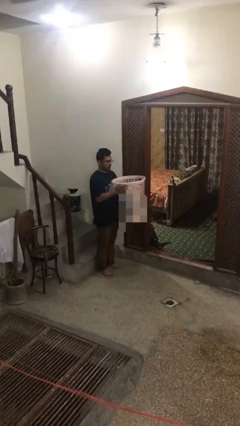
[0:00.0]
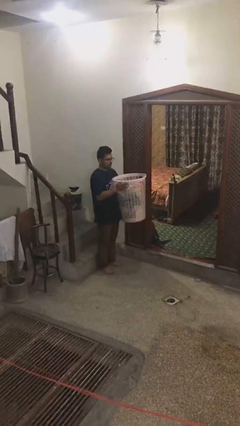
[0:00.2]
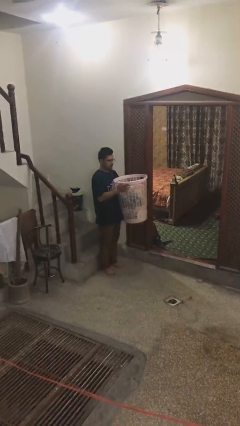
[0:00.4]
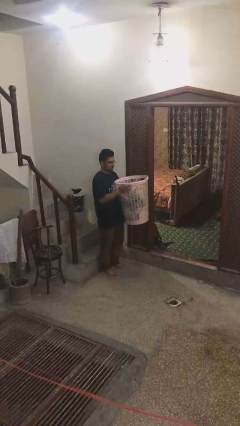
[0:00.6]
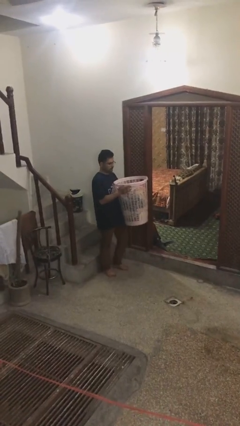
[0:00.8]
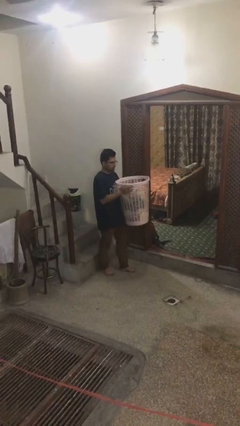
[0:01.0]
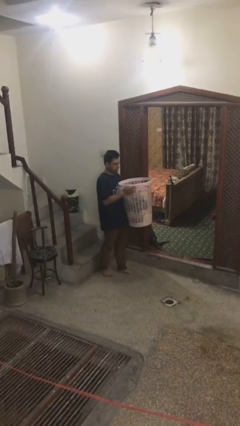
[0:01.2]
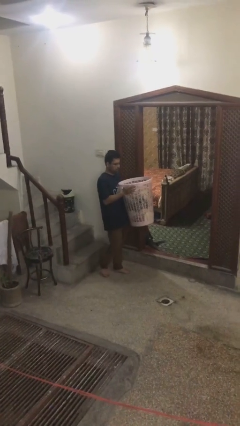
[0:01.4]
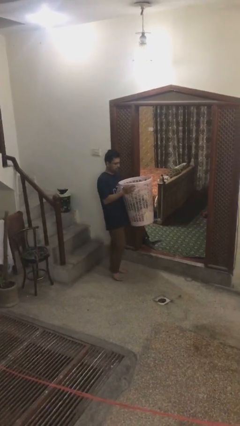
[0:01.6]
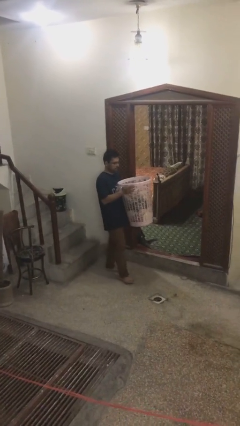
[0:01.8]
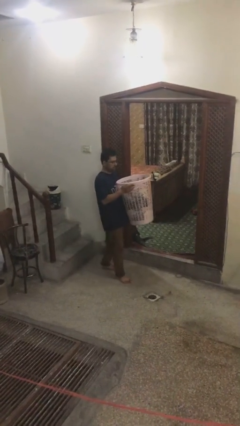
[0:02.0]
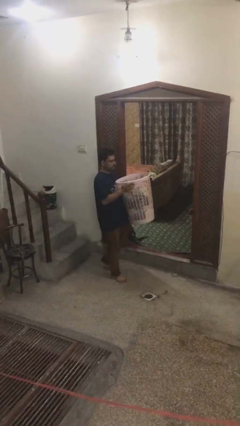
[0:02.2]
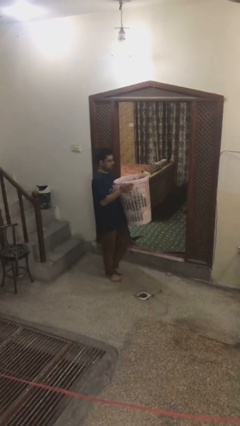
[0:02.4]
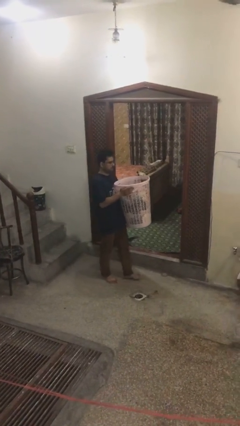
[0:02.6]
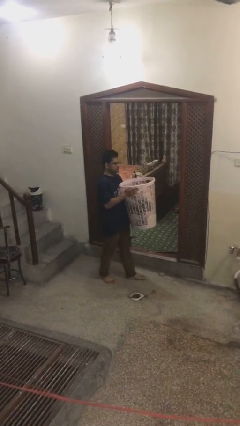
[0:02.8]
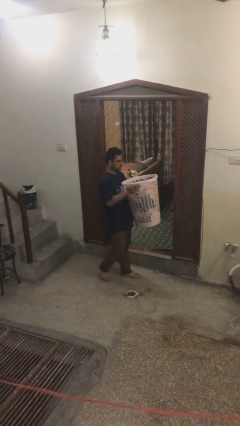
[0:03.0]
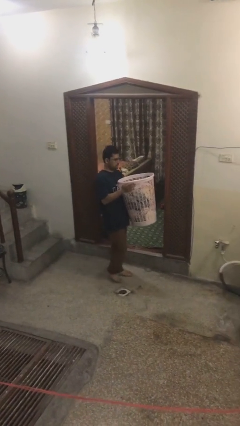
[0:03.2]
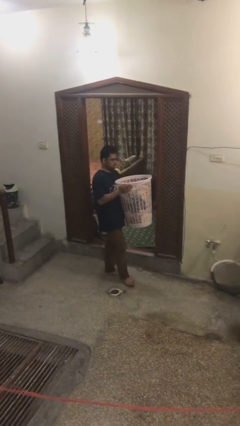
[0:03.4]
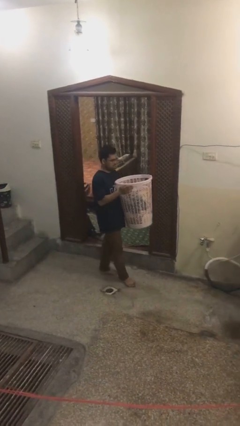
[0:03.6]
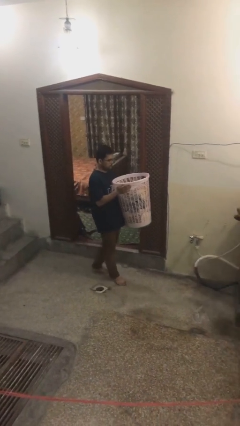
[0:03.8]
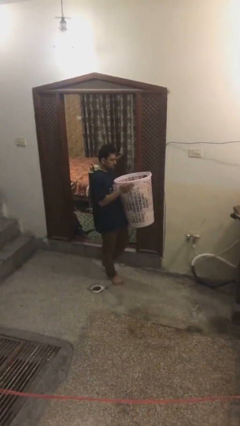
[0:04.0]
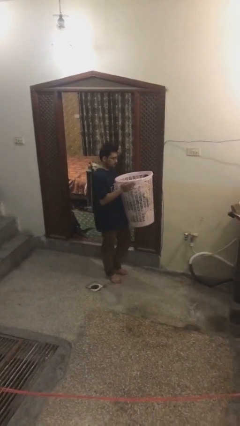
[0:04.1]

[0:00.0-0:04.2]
person carries heavy object

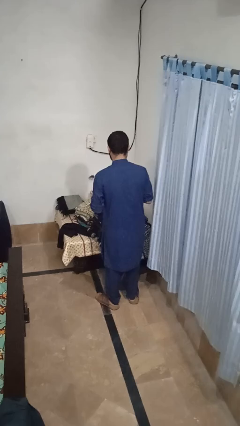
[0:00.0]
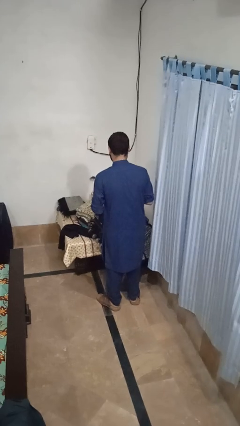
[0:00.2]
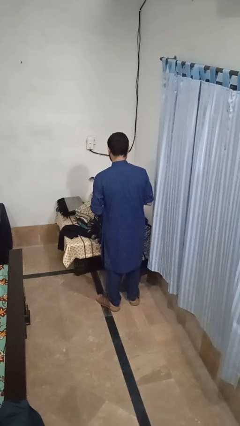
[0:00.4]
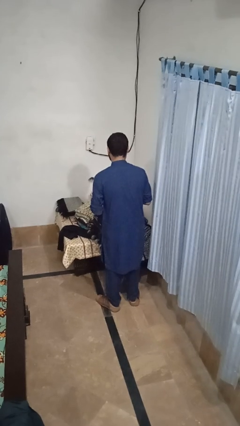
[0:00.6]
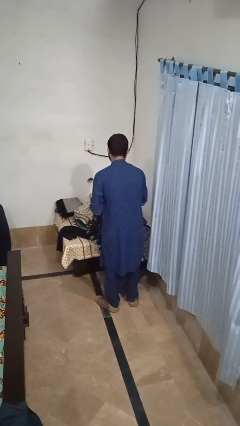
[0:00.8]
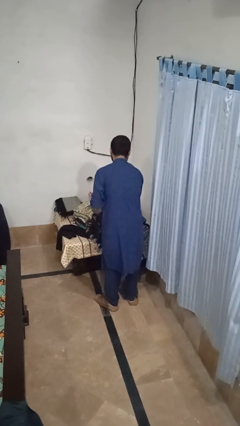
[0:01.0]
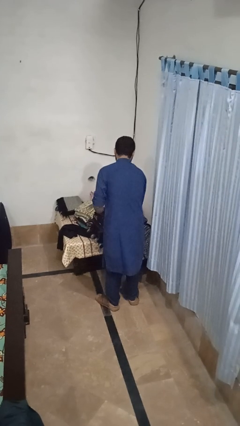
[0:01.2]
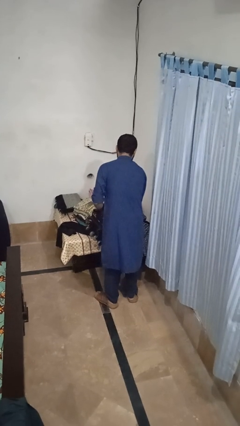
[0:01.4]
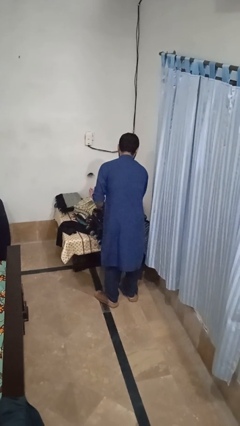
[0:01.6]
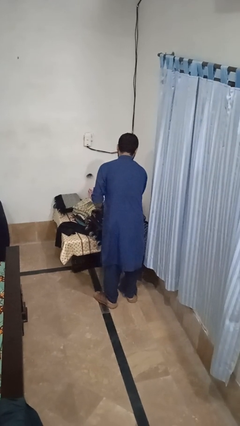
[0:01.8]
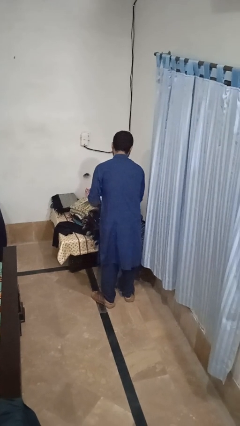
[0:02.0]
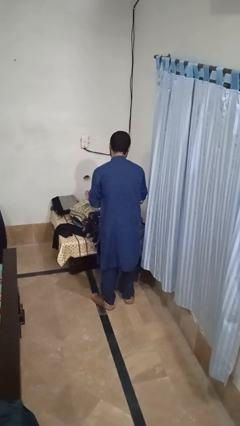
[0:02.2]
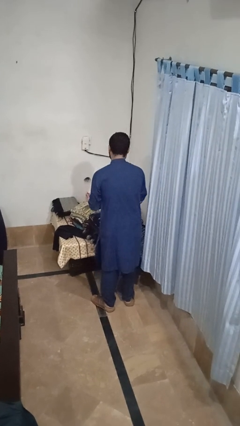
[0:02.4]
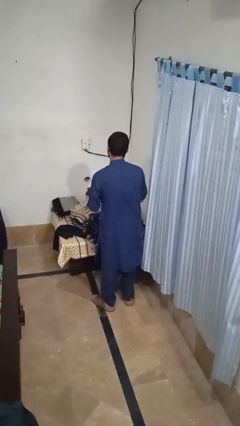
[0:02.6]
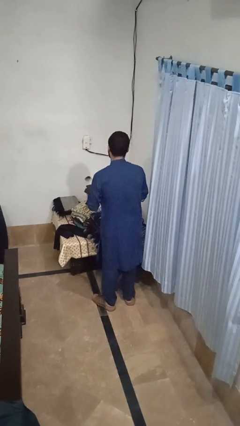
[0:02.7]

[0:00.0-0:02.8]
person loads clothes into suitcase

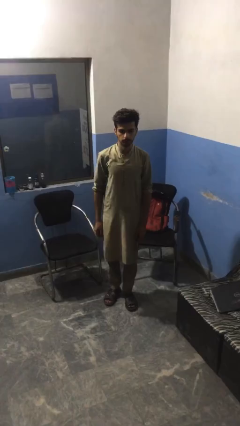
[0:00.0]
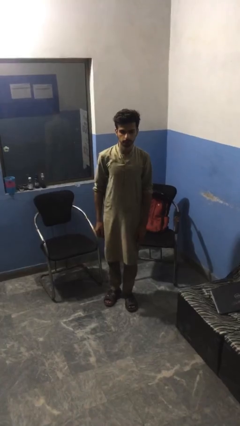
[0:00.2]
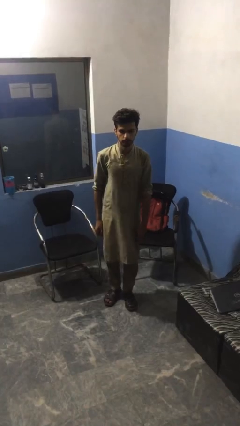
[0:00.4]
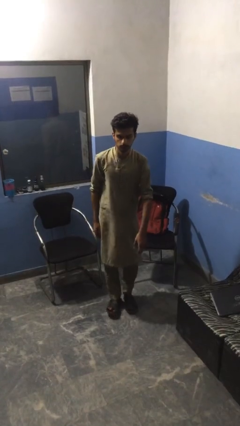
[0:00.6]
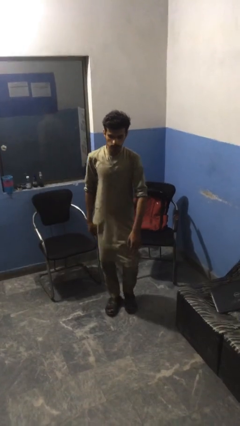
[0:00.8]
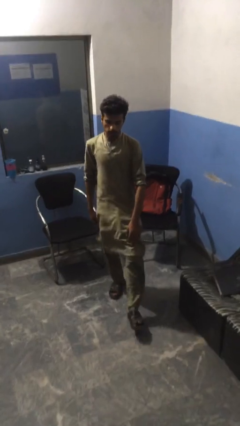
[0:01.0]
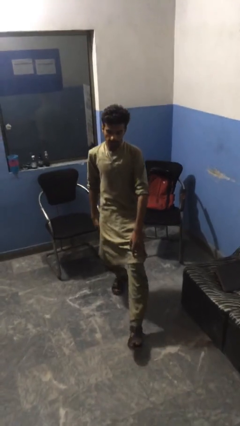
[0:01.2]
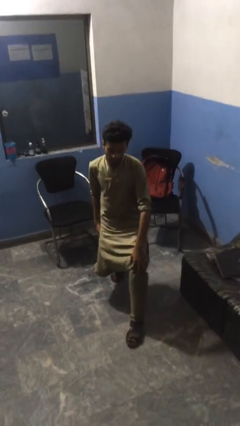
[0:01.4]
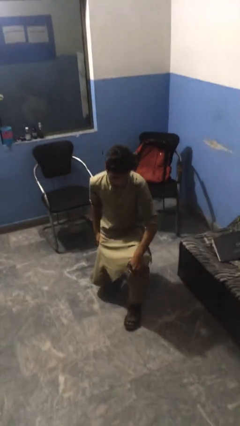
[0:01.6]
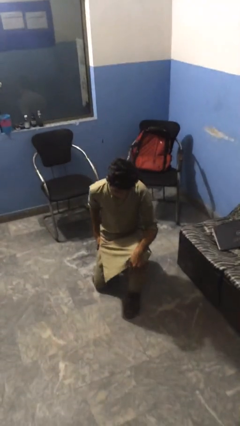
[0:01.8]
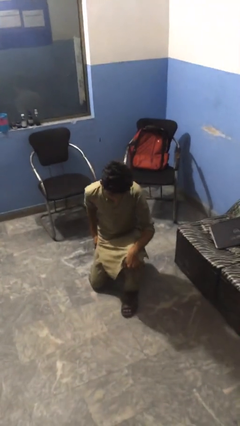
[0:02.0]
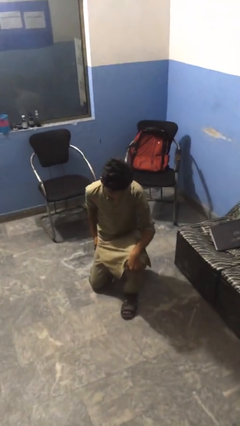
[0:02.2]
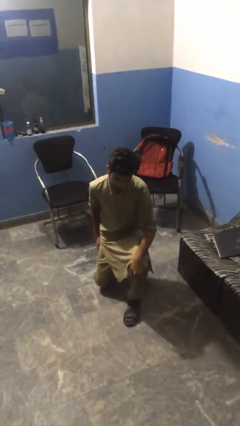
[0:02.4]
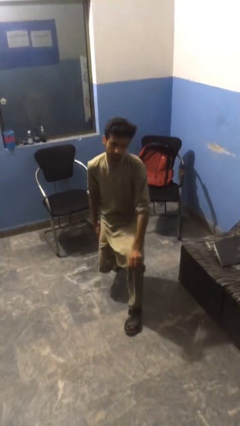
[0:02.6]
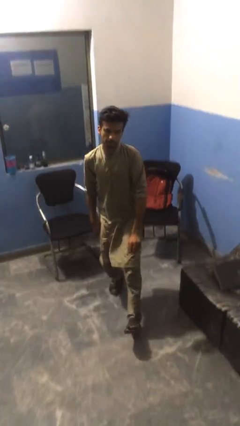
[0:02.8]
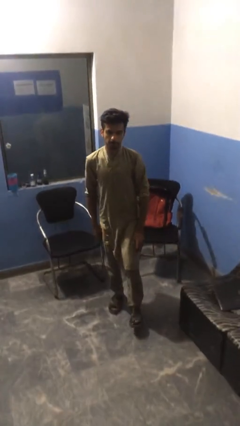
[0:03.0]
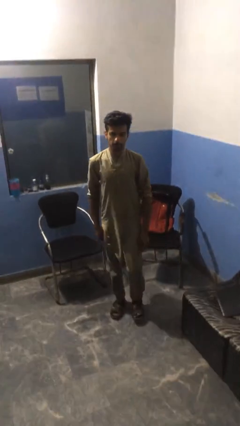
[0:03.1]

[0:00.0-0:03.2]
person exercises with lunges

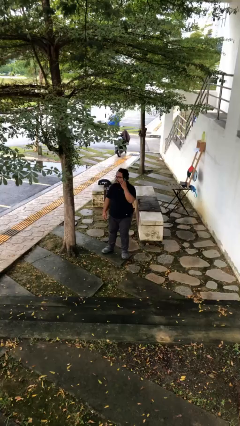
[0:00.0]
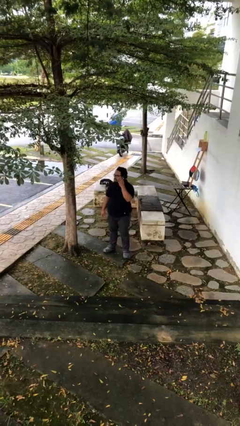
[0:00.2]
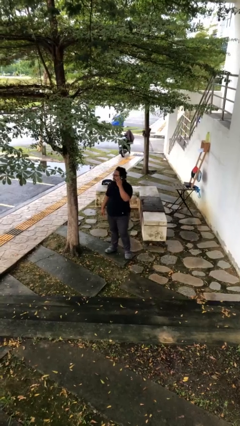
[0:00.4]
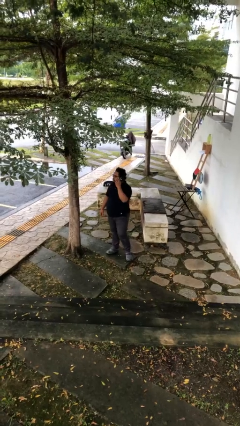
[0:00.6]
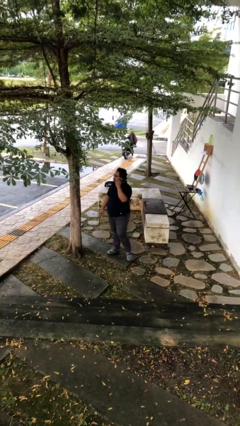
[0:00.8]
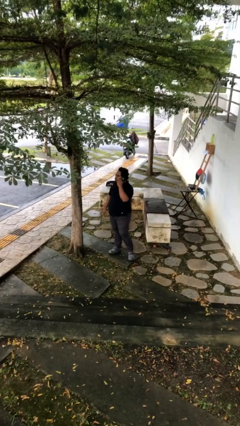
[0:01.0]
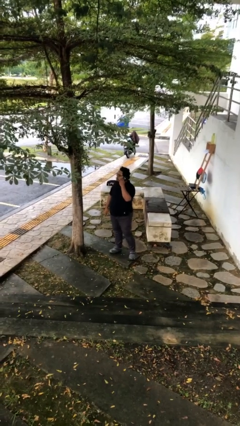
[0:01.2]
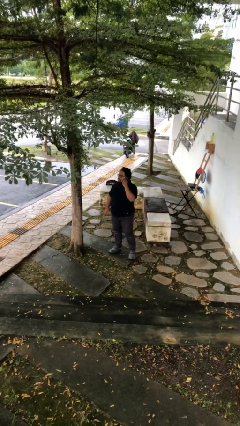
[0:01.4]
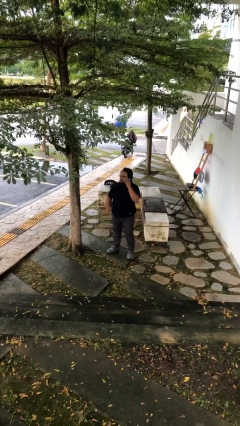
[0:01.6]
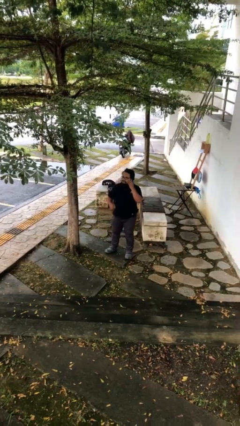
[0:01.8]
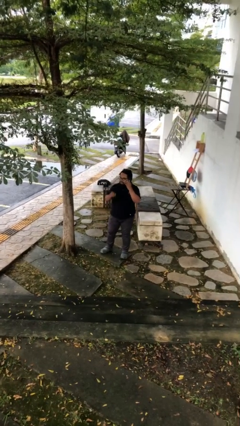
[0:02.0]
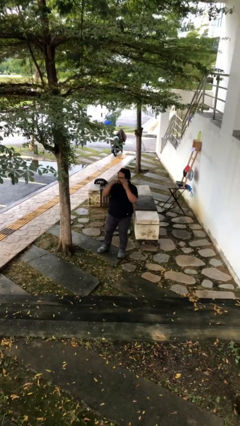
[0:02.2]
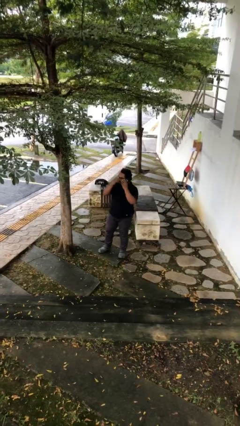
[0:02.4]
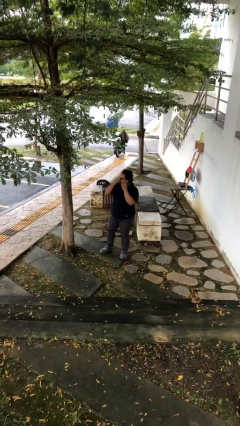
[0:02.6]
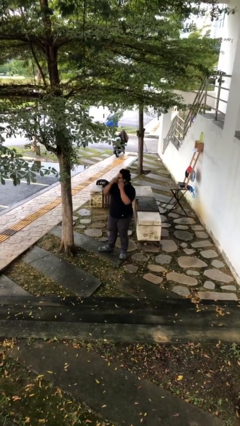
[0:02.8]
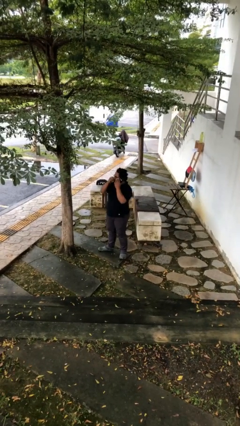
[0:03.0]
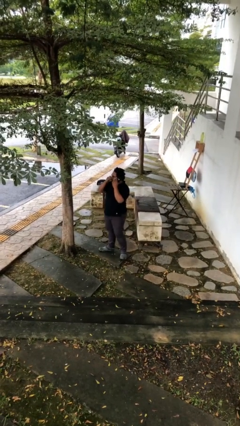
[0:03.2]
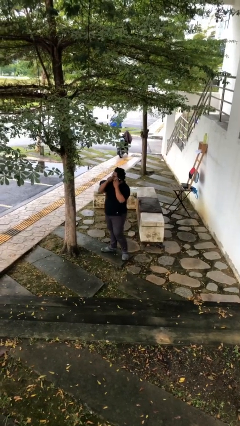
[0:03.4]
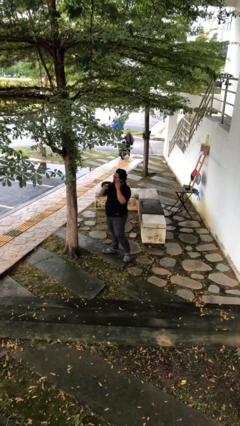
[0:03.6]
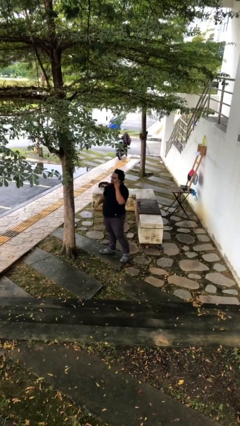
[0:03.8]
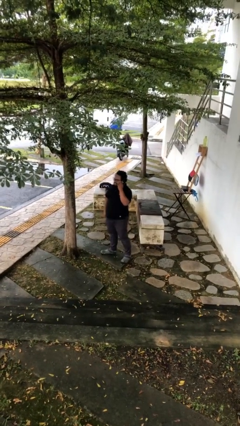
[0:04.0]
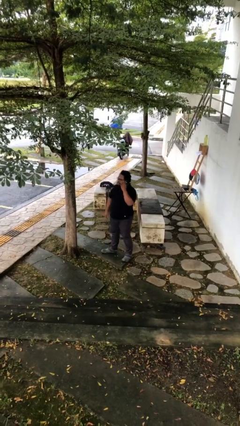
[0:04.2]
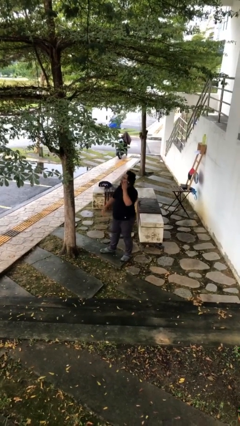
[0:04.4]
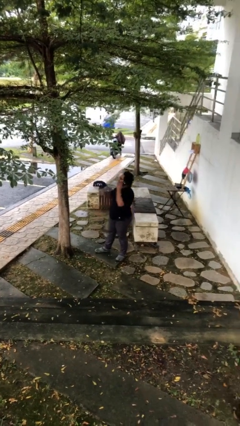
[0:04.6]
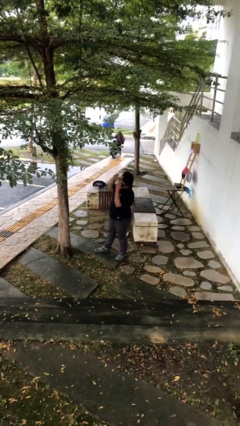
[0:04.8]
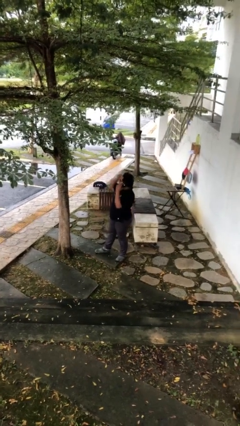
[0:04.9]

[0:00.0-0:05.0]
person talks on phone

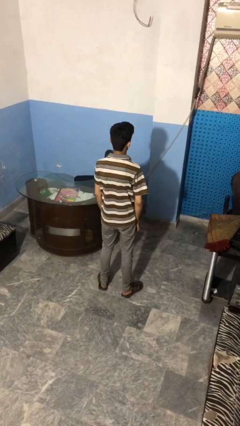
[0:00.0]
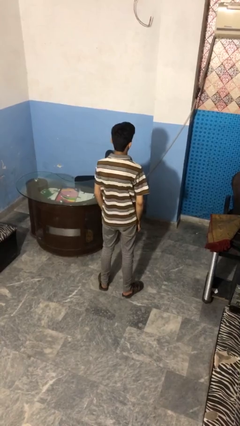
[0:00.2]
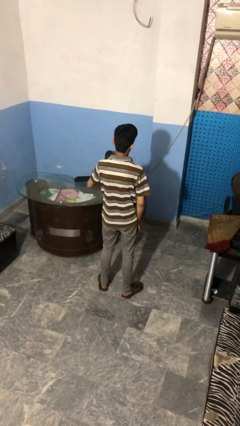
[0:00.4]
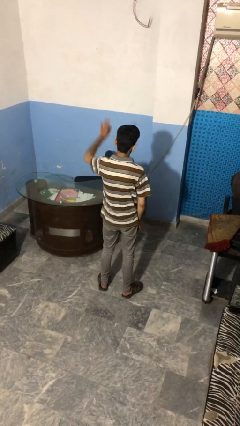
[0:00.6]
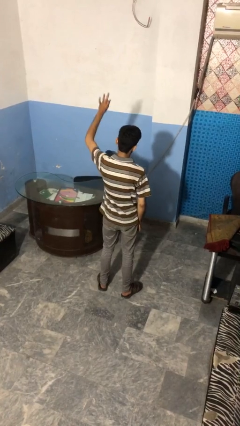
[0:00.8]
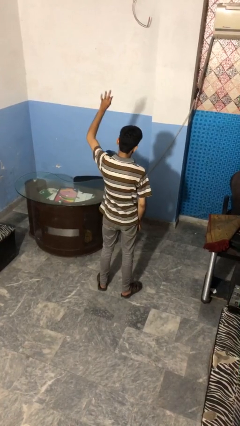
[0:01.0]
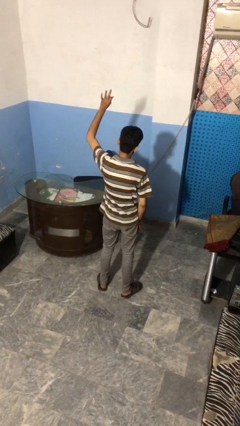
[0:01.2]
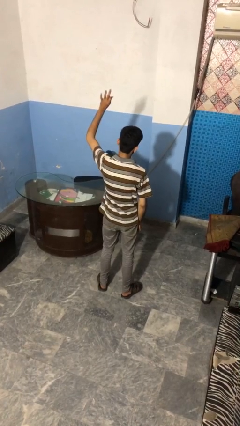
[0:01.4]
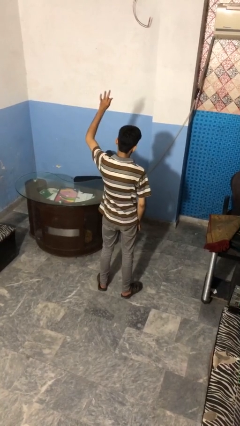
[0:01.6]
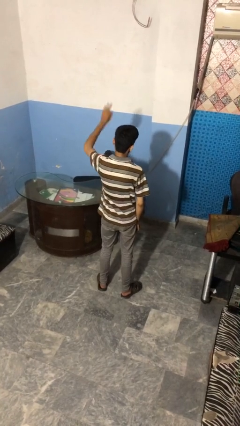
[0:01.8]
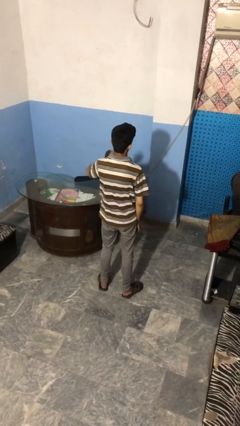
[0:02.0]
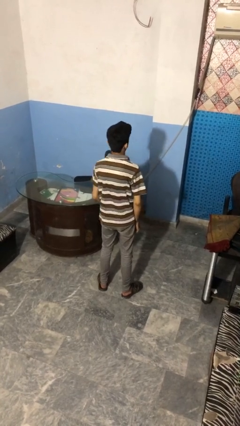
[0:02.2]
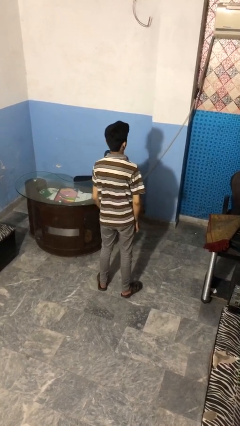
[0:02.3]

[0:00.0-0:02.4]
person gestures number three
